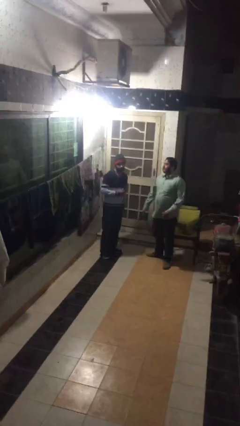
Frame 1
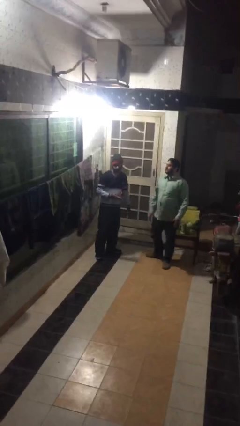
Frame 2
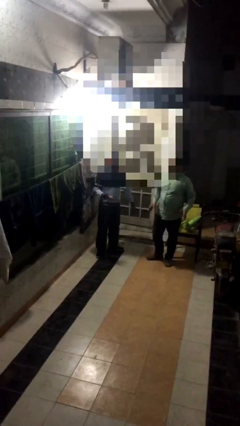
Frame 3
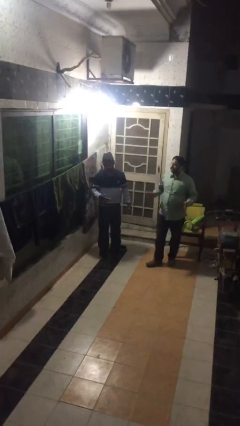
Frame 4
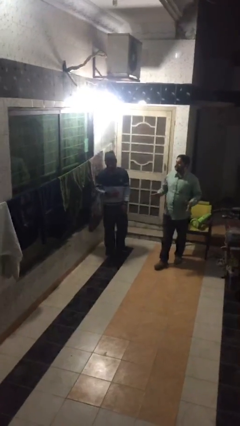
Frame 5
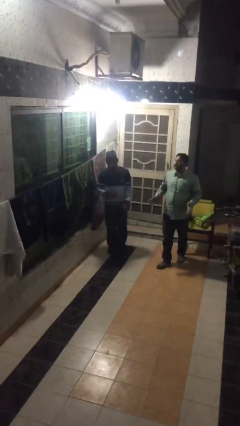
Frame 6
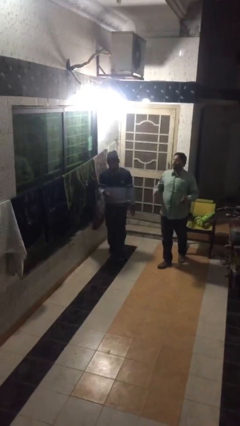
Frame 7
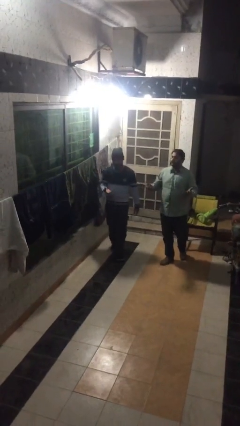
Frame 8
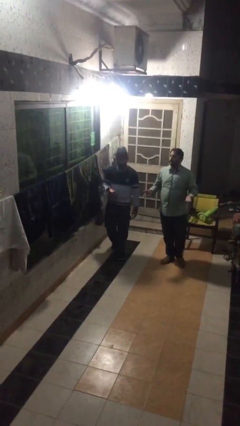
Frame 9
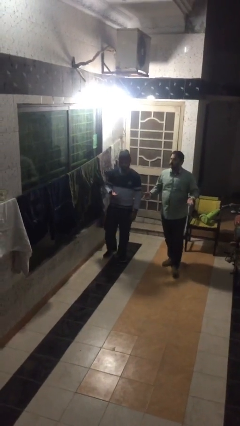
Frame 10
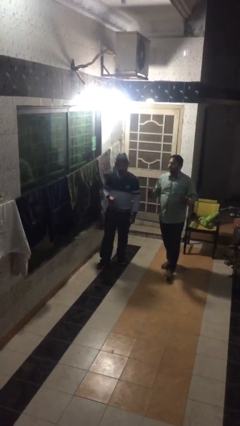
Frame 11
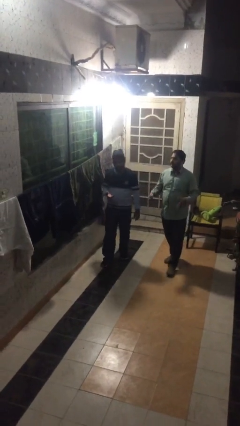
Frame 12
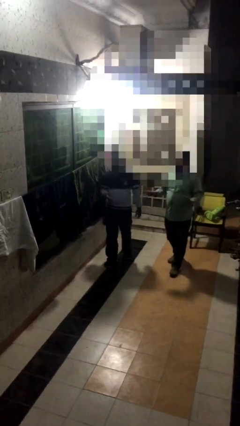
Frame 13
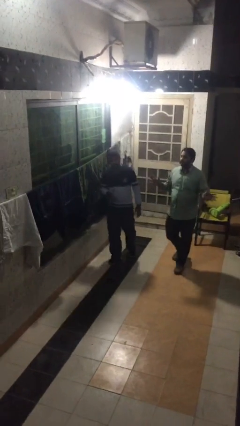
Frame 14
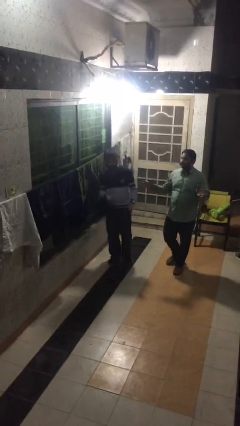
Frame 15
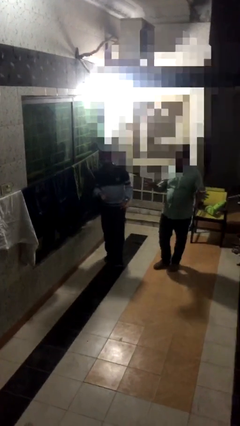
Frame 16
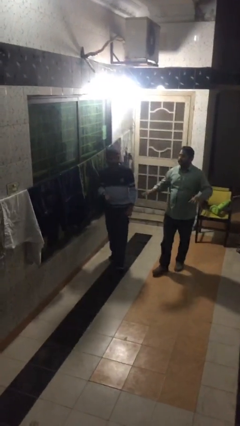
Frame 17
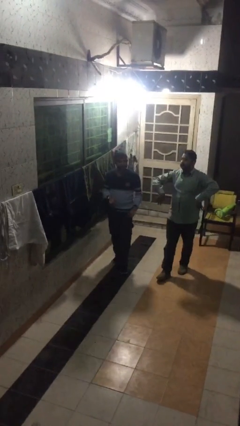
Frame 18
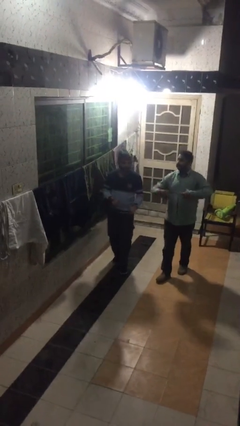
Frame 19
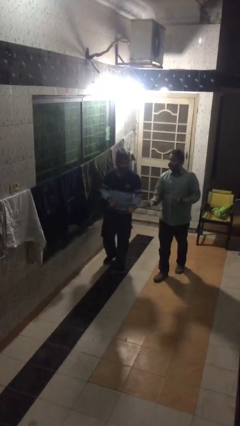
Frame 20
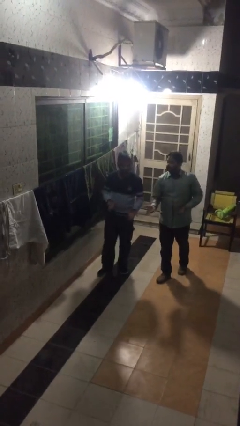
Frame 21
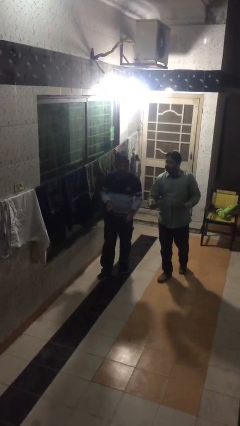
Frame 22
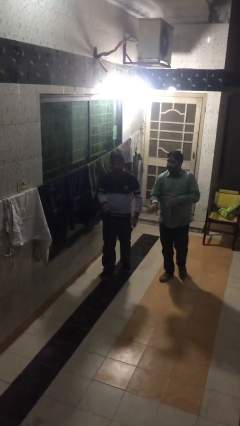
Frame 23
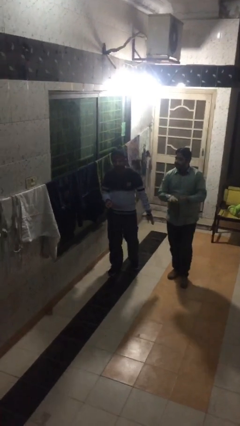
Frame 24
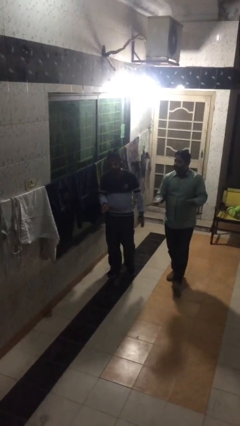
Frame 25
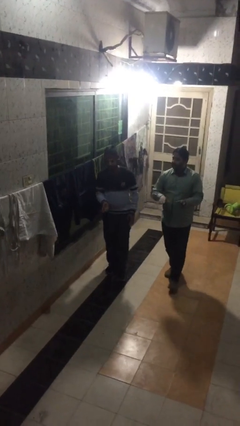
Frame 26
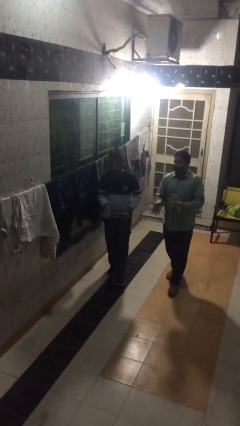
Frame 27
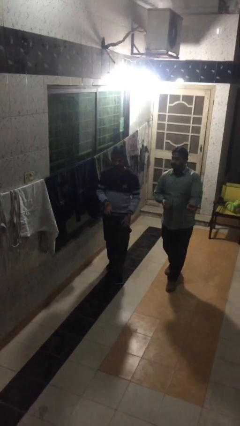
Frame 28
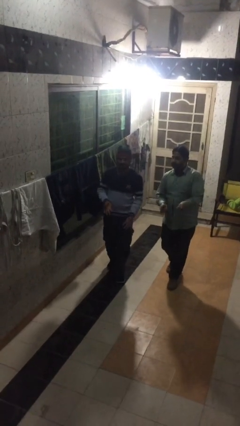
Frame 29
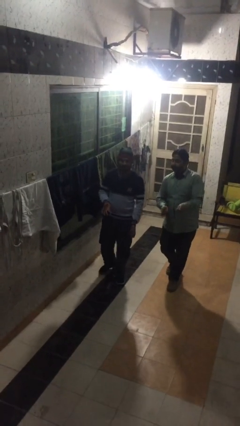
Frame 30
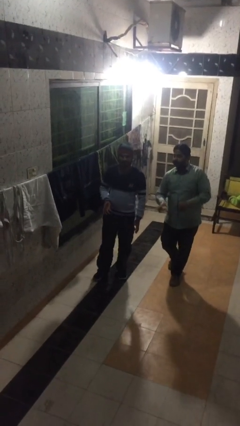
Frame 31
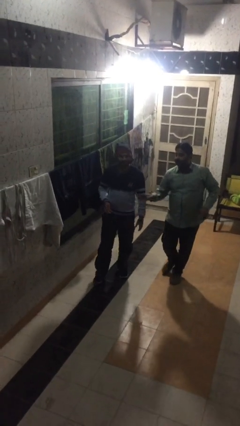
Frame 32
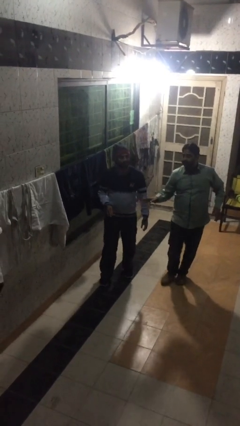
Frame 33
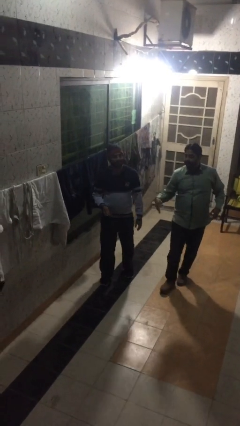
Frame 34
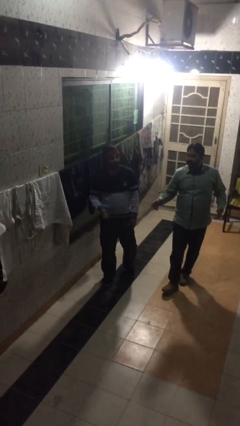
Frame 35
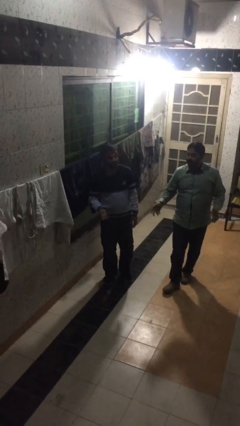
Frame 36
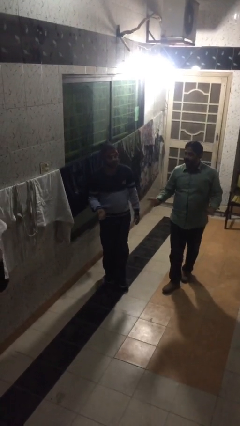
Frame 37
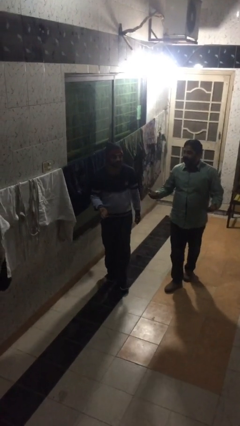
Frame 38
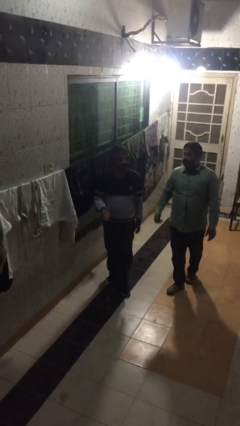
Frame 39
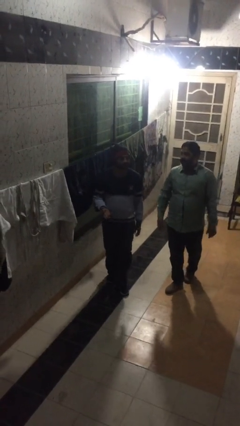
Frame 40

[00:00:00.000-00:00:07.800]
person talks to person

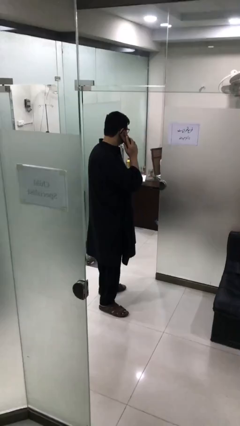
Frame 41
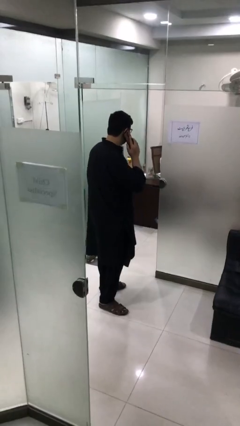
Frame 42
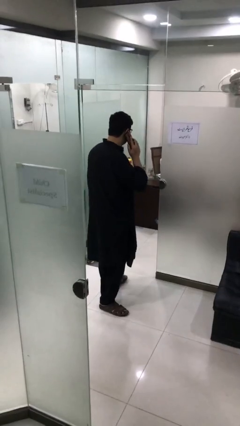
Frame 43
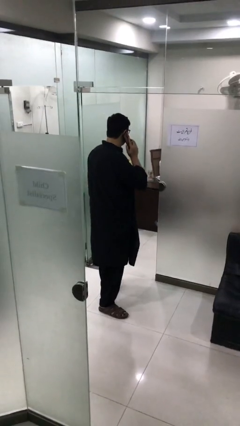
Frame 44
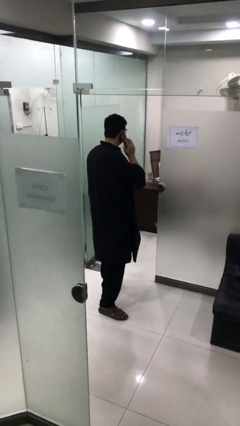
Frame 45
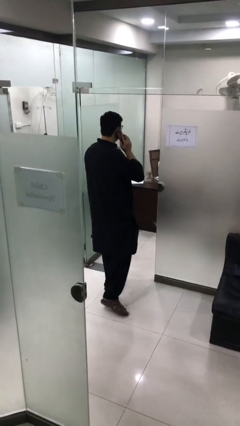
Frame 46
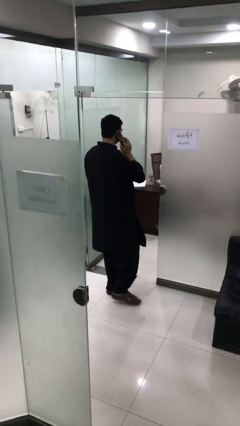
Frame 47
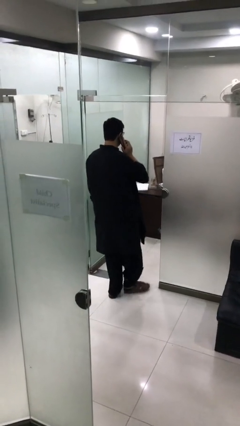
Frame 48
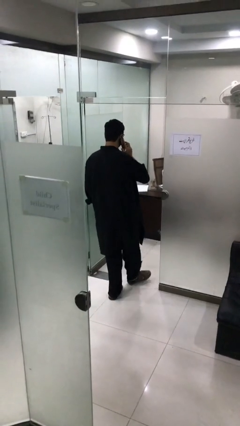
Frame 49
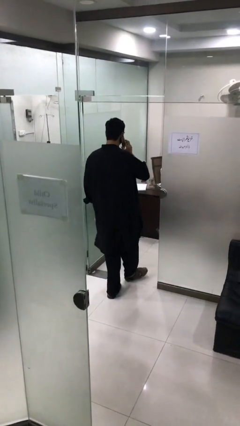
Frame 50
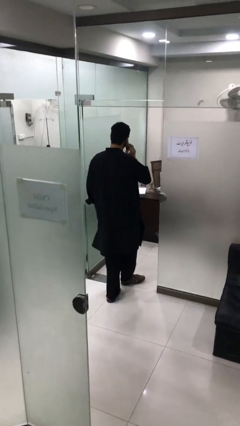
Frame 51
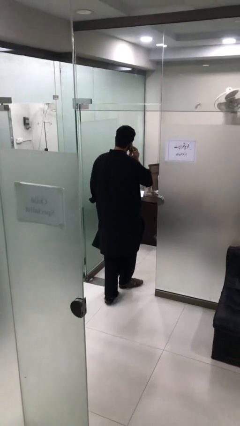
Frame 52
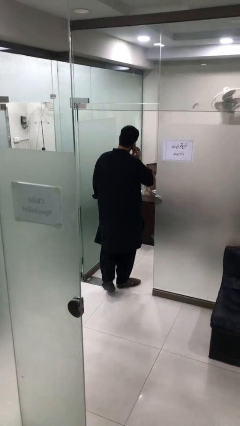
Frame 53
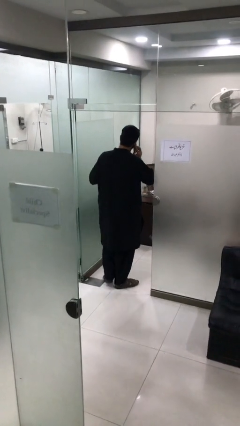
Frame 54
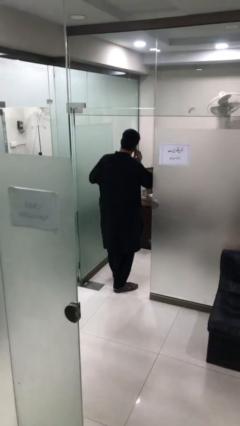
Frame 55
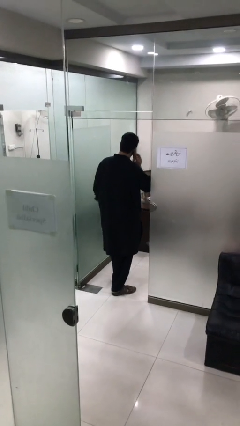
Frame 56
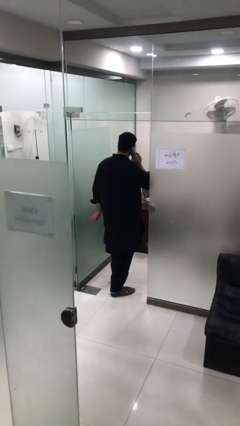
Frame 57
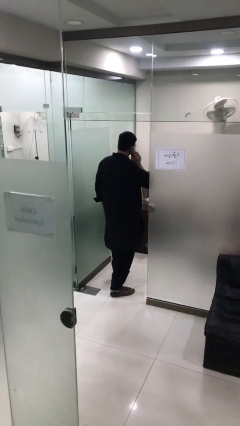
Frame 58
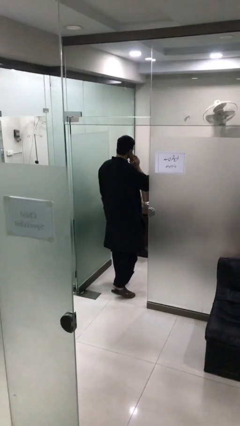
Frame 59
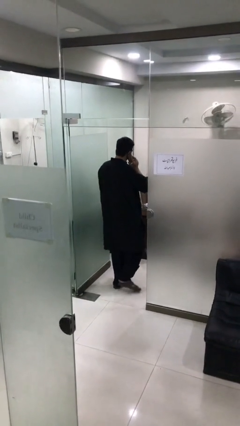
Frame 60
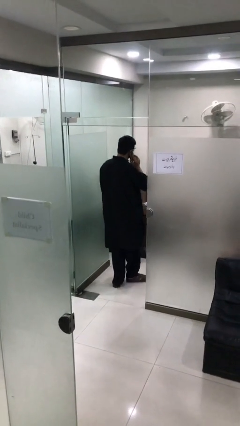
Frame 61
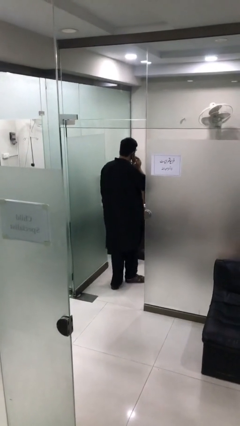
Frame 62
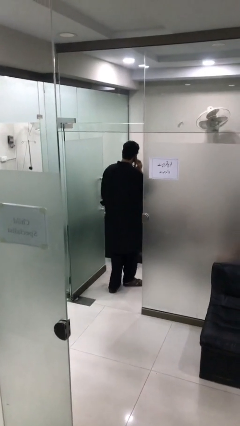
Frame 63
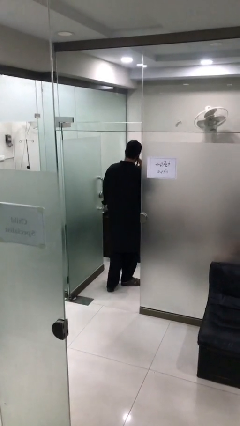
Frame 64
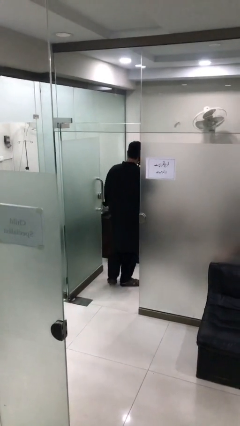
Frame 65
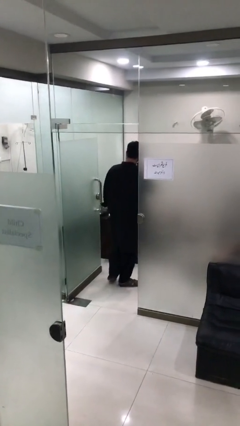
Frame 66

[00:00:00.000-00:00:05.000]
person exits scene through structure

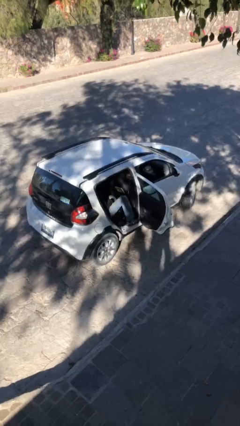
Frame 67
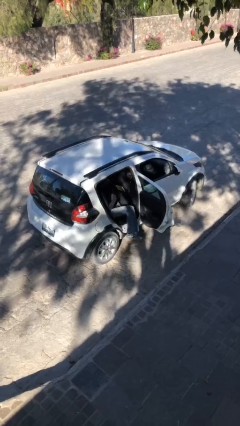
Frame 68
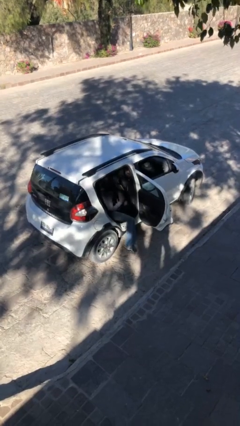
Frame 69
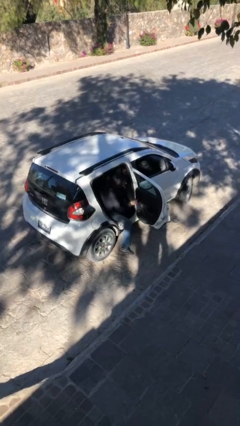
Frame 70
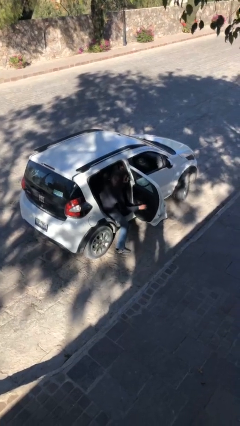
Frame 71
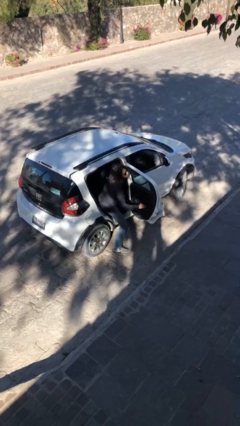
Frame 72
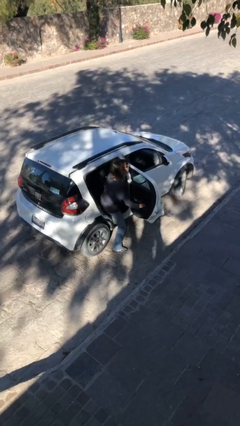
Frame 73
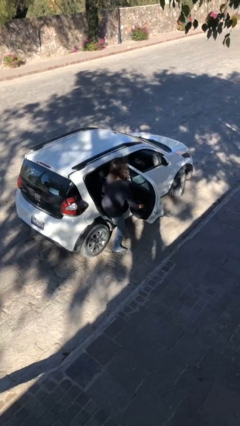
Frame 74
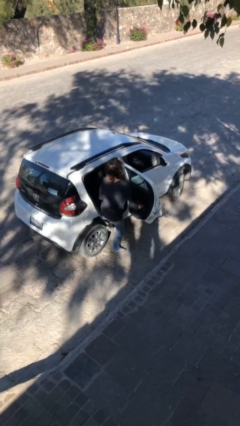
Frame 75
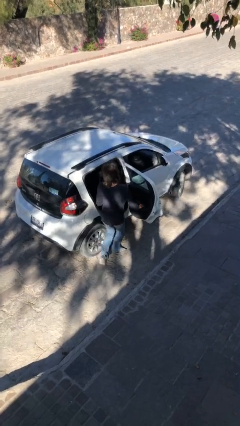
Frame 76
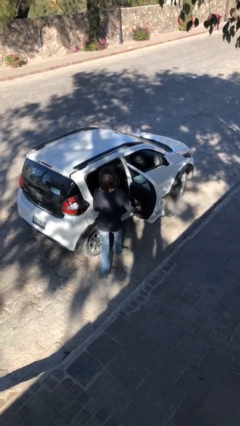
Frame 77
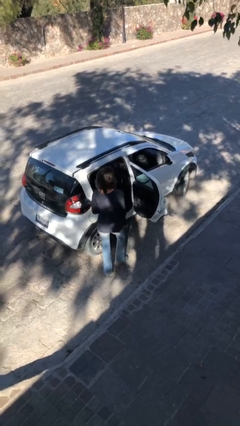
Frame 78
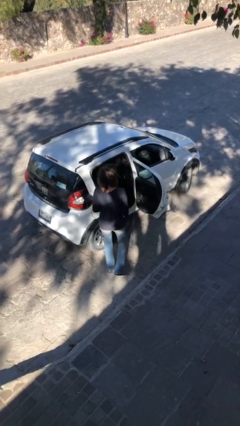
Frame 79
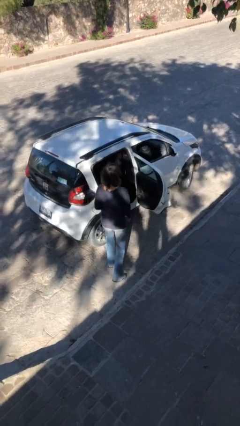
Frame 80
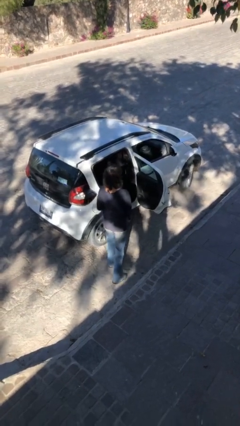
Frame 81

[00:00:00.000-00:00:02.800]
person exits car

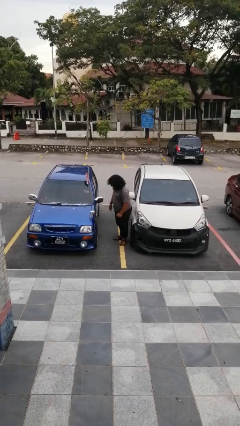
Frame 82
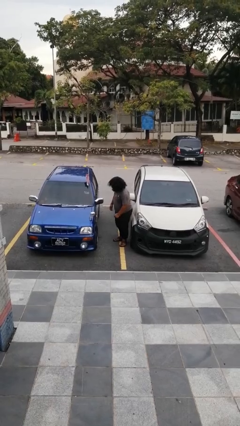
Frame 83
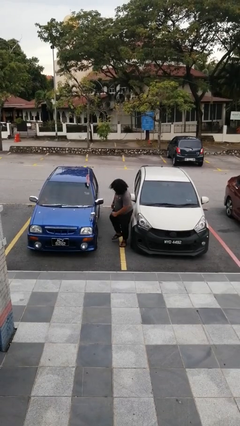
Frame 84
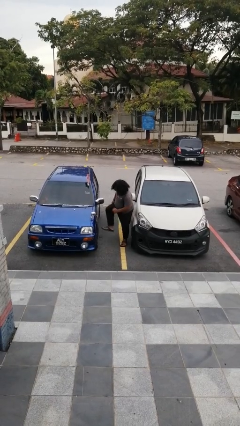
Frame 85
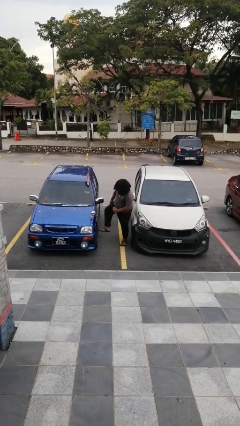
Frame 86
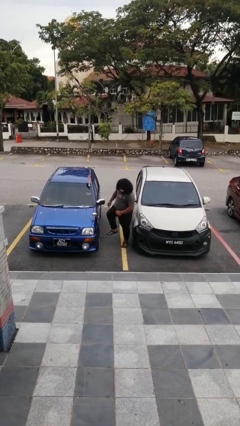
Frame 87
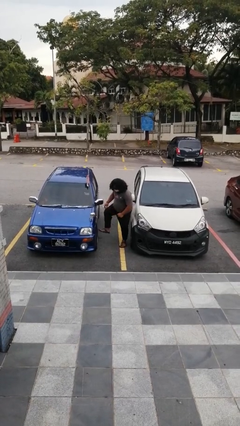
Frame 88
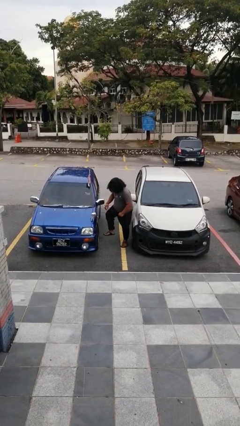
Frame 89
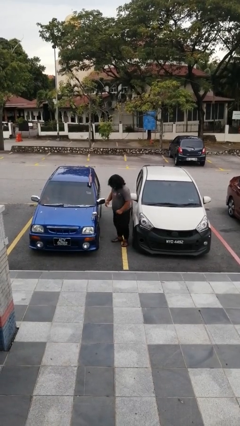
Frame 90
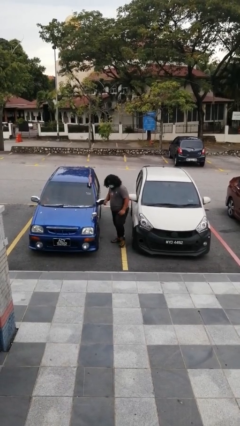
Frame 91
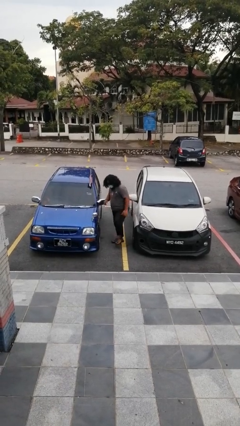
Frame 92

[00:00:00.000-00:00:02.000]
person kicks car tires

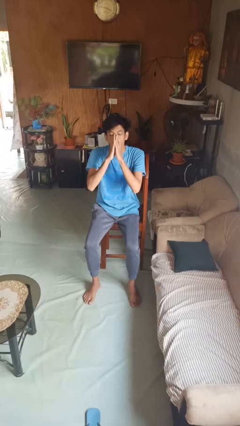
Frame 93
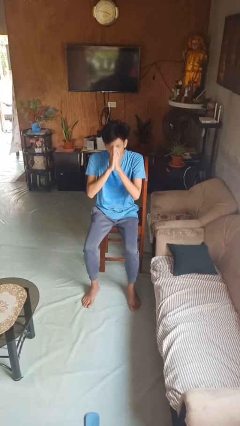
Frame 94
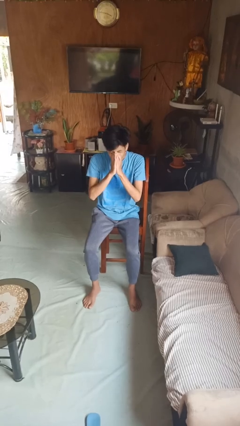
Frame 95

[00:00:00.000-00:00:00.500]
person sneezes into hand
